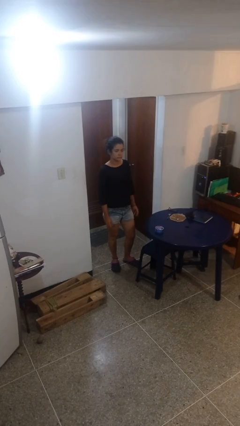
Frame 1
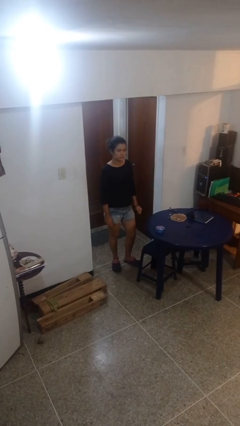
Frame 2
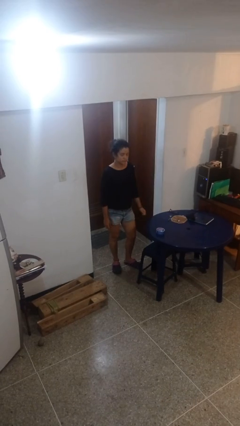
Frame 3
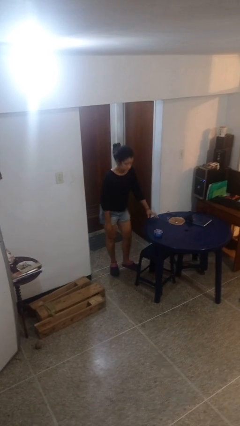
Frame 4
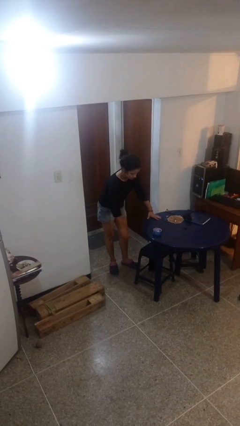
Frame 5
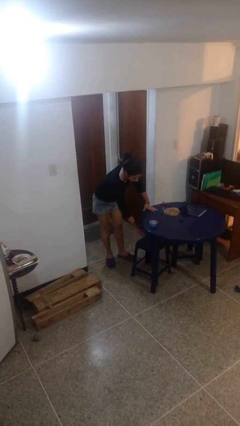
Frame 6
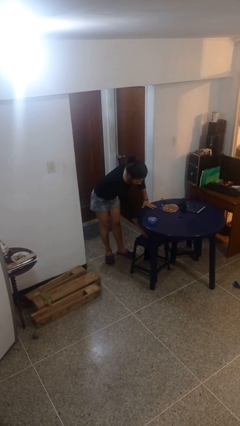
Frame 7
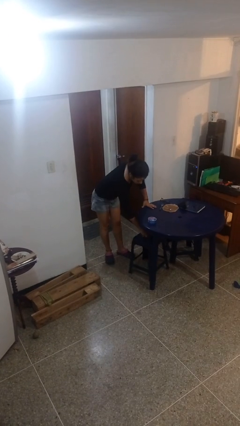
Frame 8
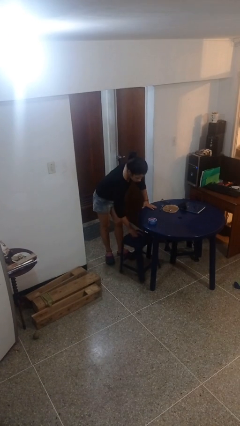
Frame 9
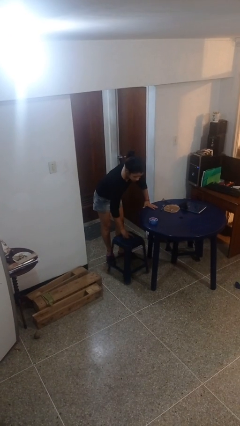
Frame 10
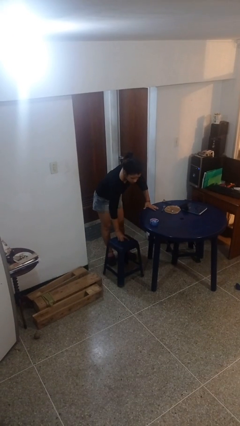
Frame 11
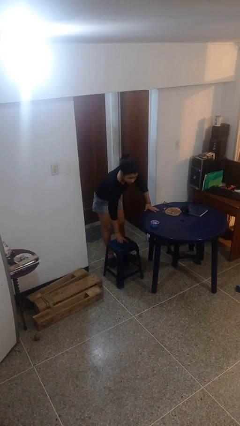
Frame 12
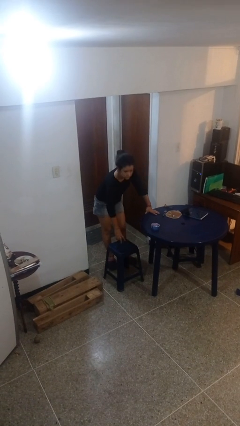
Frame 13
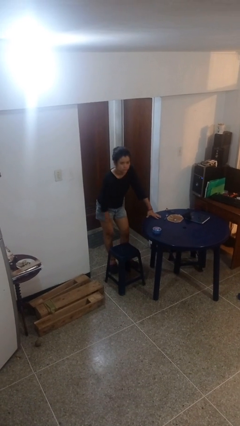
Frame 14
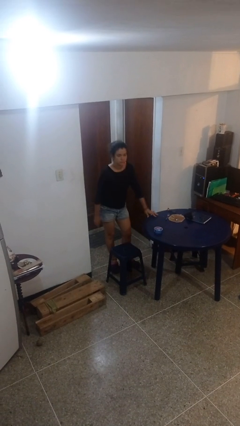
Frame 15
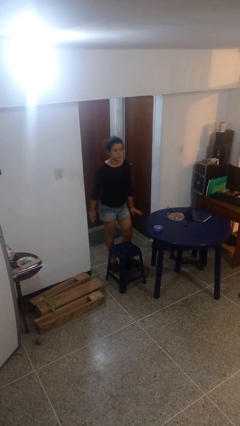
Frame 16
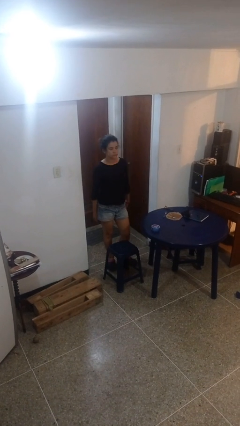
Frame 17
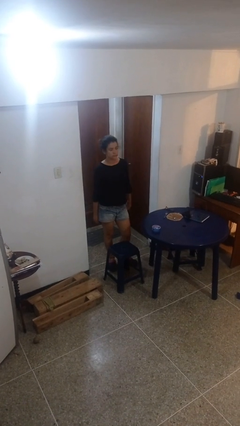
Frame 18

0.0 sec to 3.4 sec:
person pulls out chair

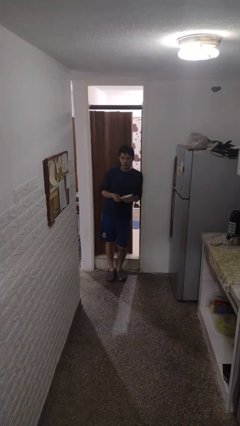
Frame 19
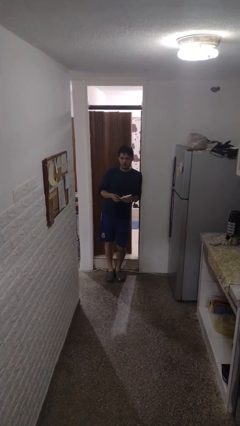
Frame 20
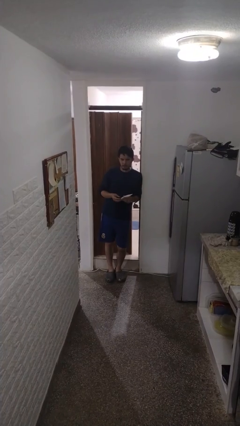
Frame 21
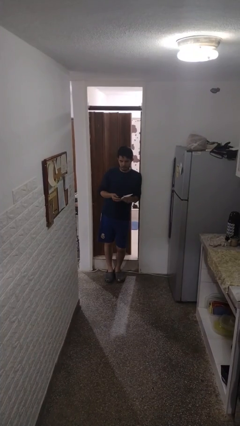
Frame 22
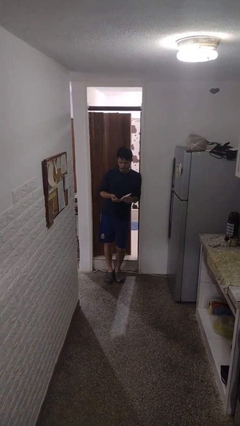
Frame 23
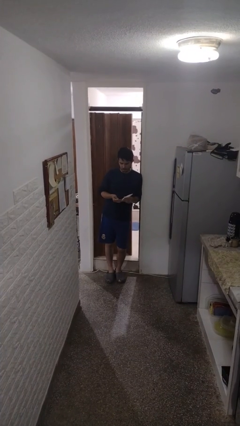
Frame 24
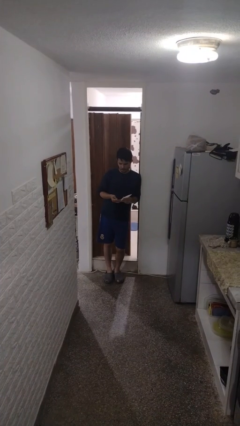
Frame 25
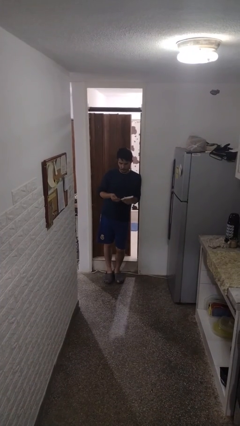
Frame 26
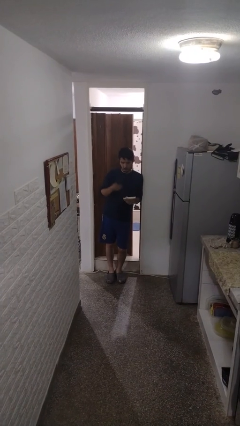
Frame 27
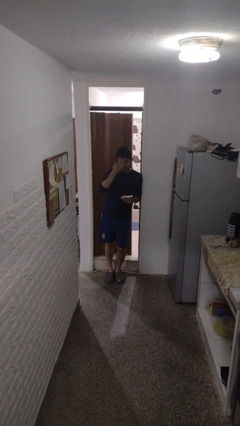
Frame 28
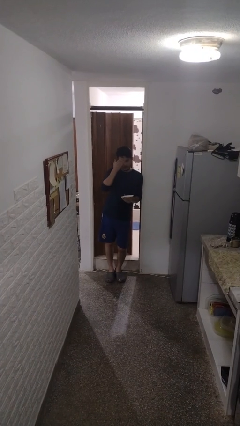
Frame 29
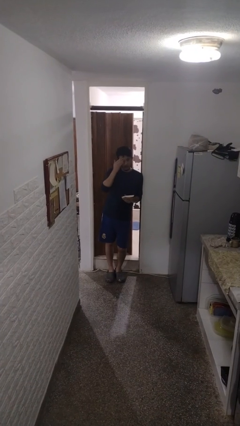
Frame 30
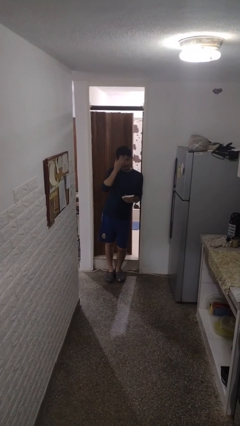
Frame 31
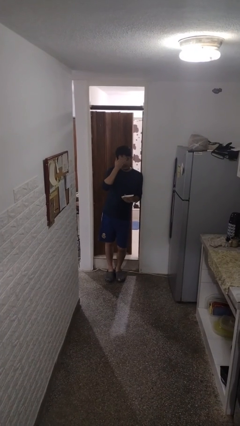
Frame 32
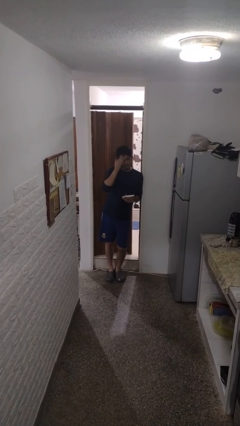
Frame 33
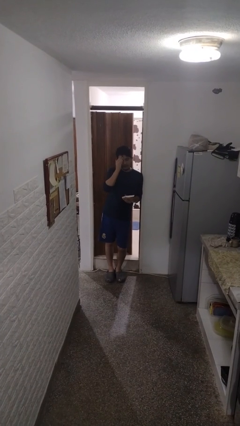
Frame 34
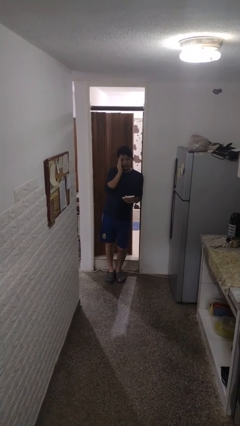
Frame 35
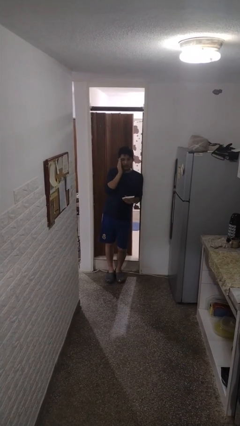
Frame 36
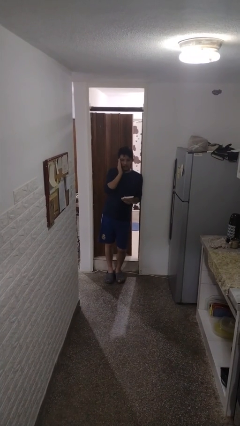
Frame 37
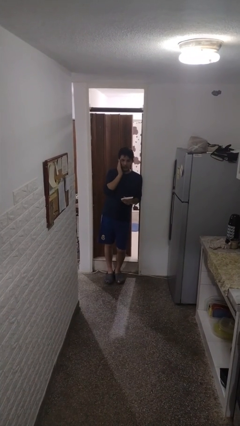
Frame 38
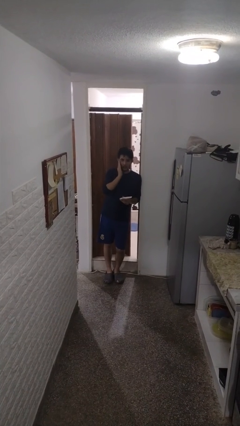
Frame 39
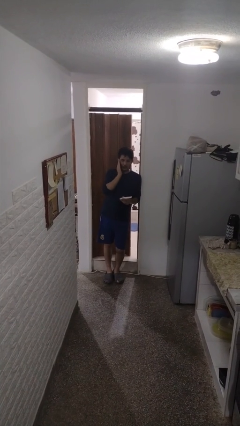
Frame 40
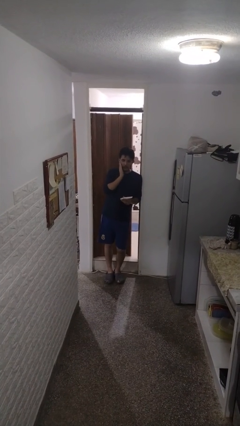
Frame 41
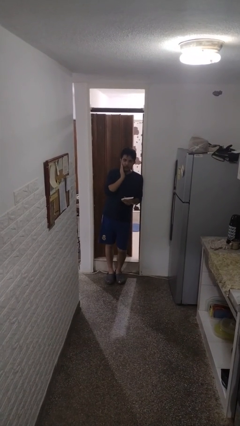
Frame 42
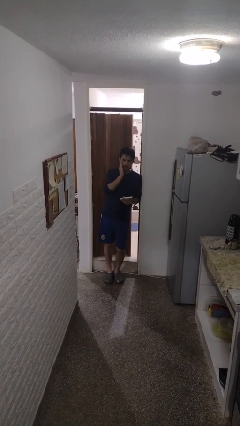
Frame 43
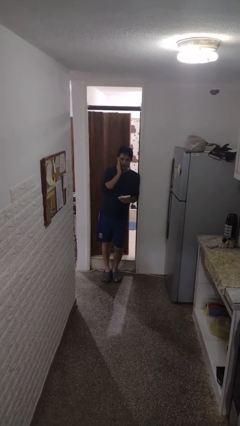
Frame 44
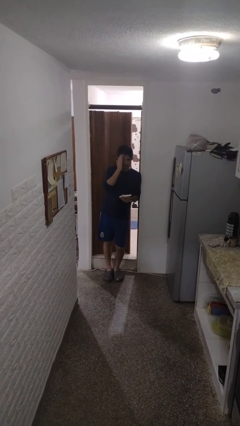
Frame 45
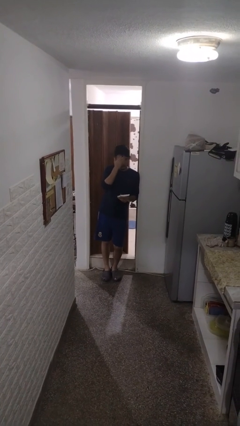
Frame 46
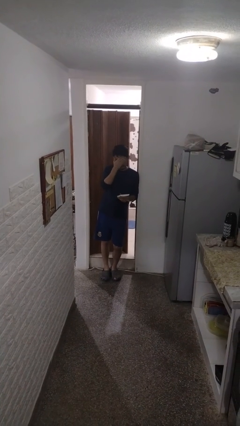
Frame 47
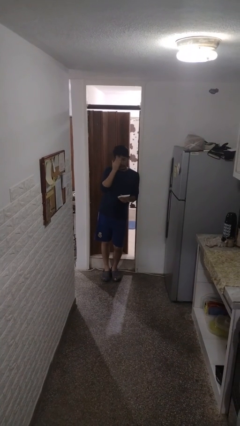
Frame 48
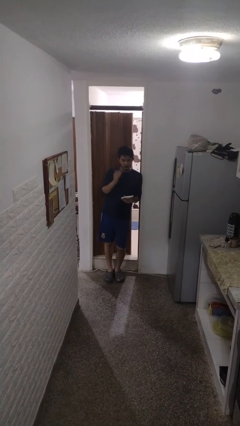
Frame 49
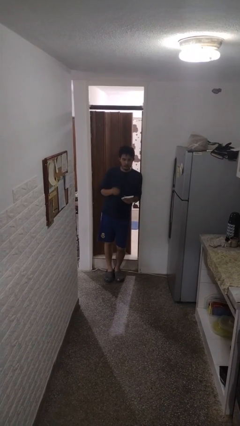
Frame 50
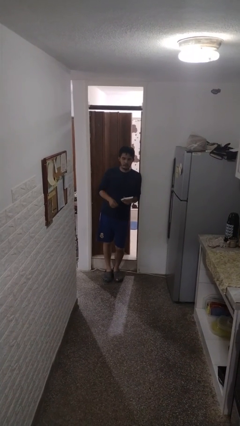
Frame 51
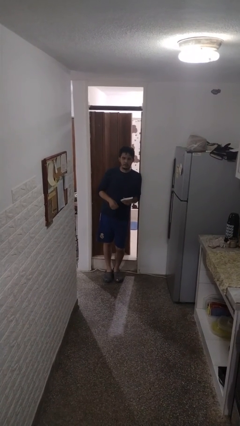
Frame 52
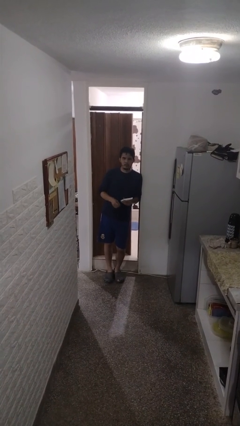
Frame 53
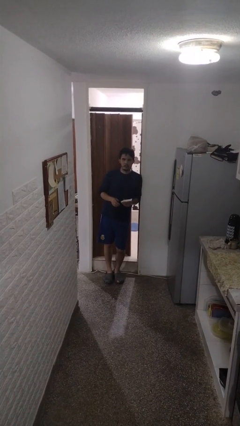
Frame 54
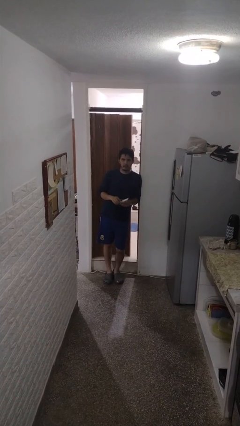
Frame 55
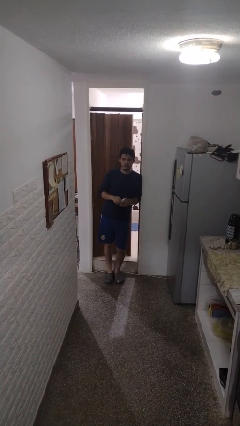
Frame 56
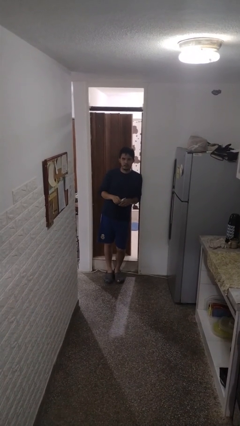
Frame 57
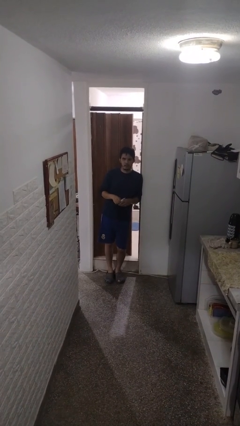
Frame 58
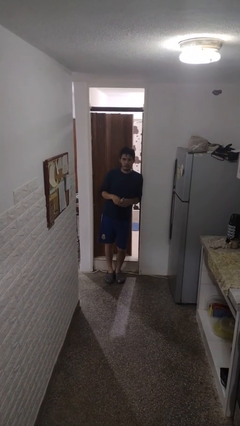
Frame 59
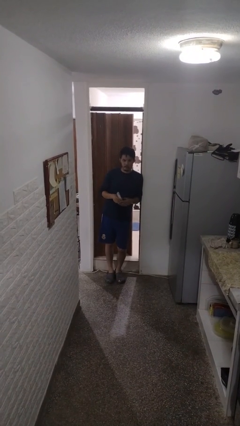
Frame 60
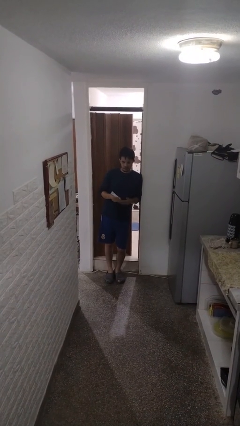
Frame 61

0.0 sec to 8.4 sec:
person applies facial moisturizer

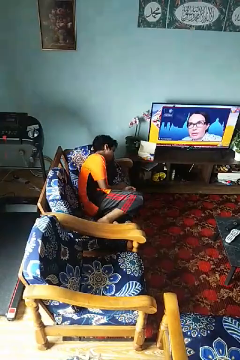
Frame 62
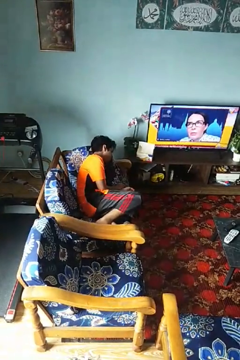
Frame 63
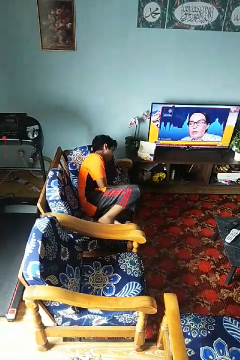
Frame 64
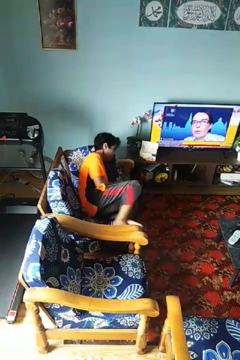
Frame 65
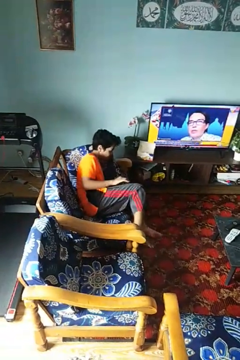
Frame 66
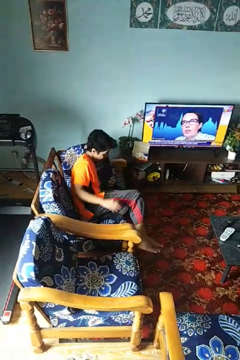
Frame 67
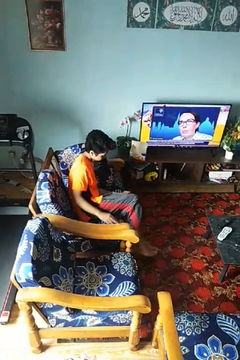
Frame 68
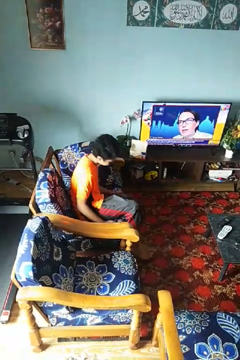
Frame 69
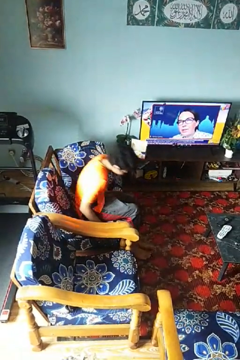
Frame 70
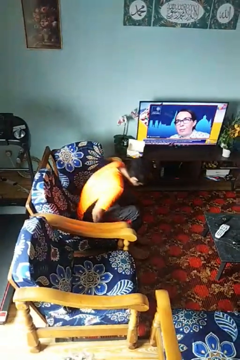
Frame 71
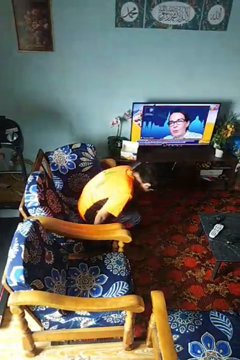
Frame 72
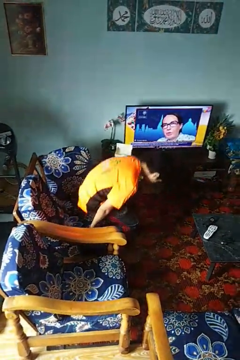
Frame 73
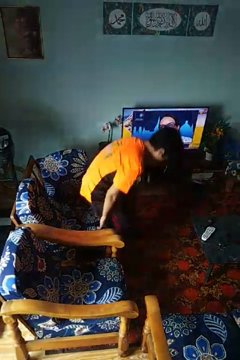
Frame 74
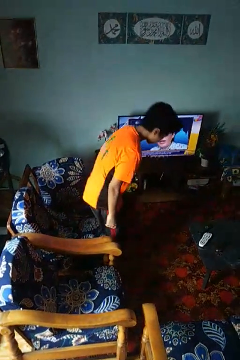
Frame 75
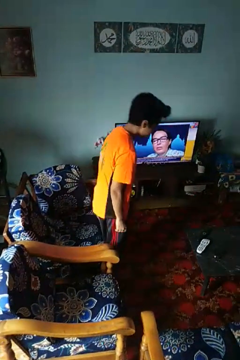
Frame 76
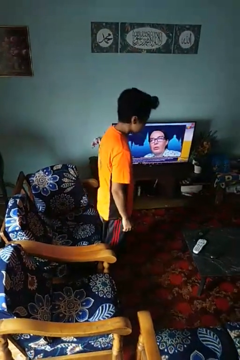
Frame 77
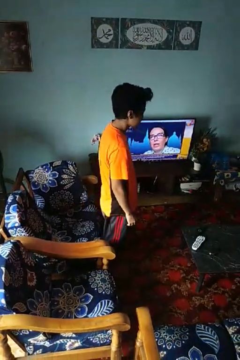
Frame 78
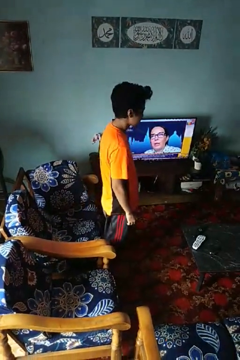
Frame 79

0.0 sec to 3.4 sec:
person stands up

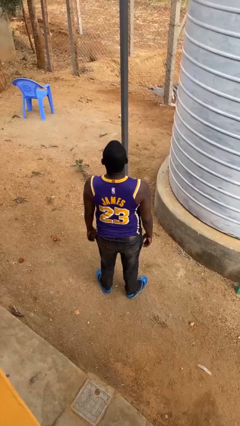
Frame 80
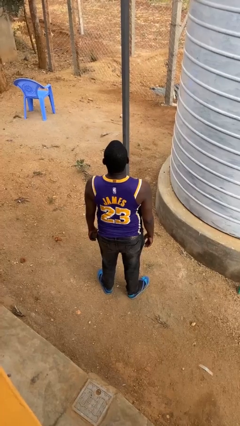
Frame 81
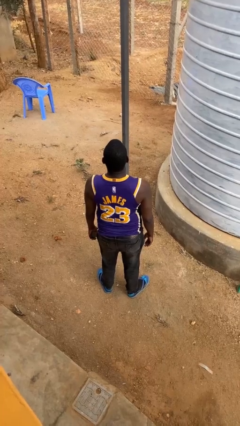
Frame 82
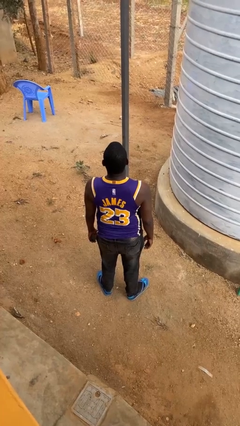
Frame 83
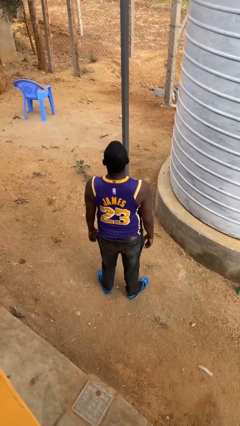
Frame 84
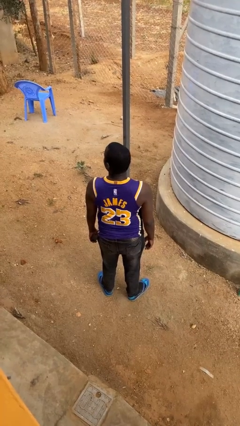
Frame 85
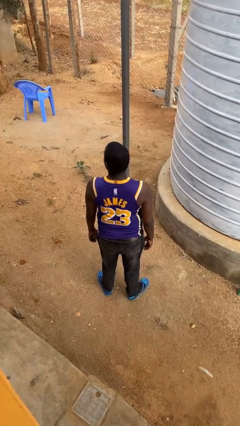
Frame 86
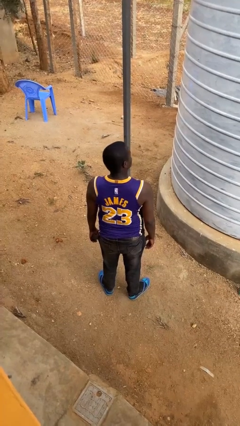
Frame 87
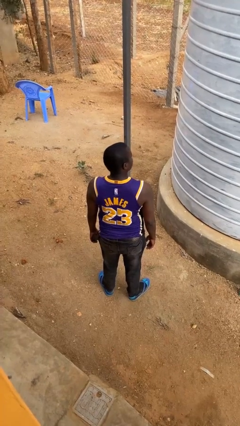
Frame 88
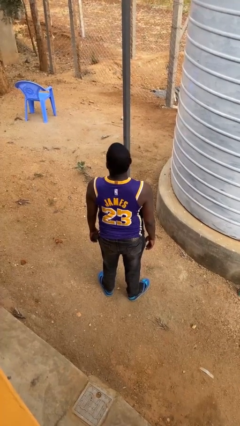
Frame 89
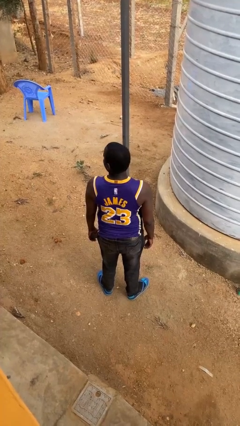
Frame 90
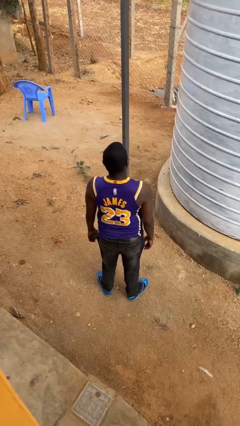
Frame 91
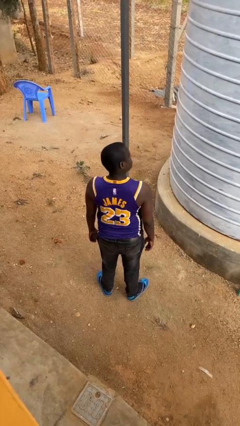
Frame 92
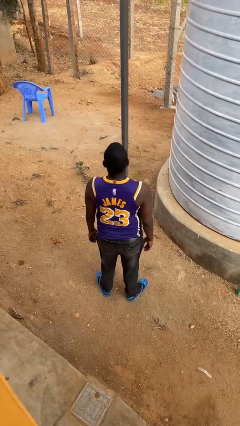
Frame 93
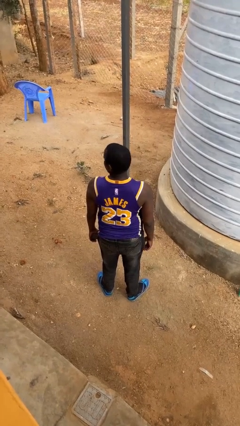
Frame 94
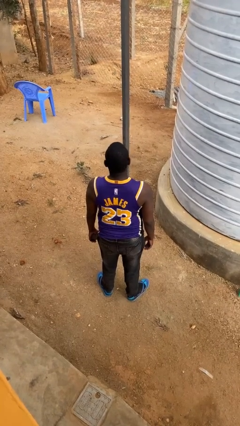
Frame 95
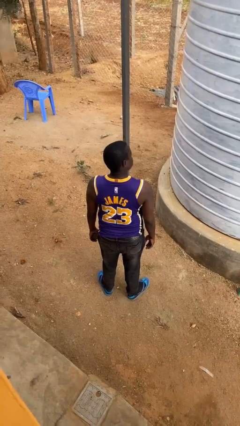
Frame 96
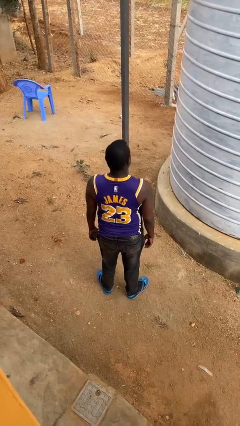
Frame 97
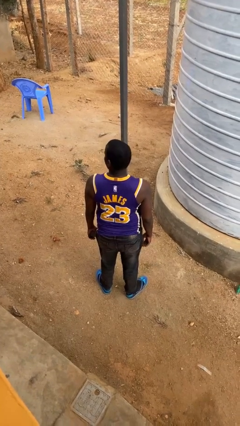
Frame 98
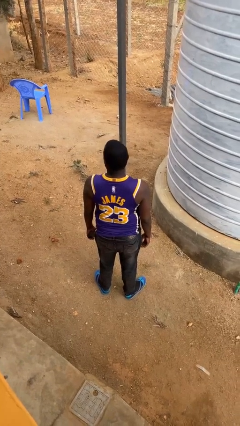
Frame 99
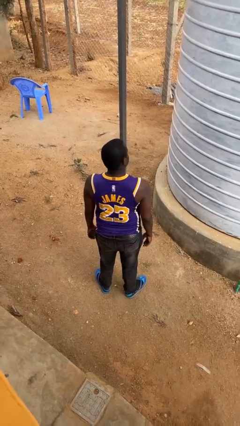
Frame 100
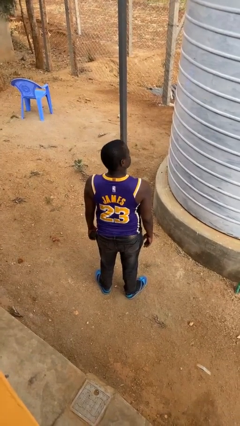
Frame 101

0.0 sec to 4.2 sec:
person shakes head
